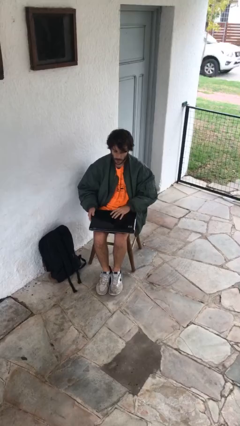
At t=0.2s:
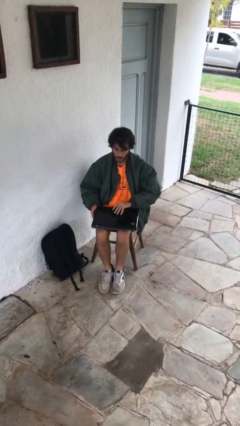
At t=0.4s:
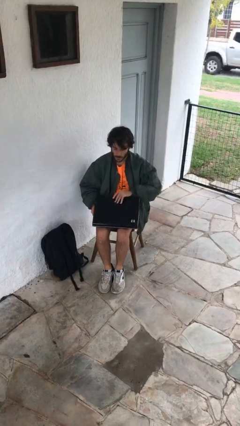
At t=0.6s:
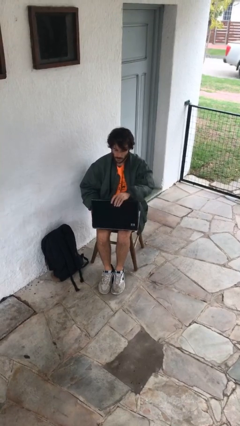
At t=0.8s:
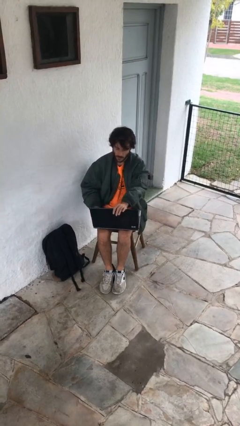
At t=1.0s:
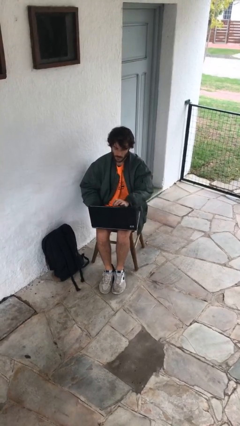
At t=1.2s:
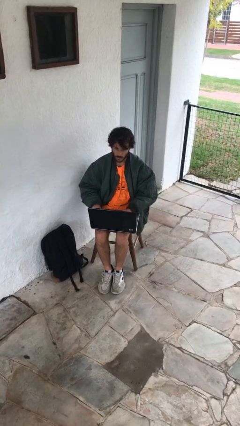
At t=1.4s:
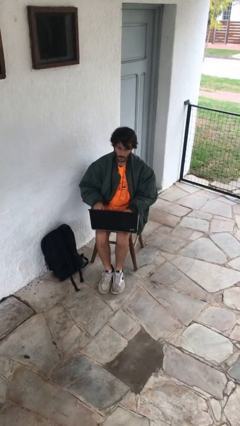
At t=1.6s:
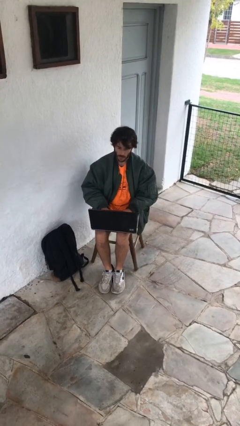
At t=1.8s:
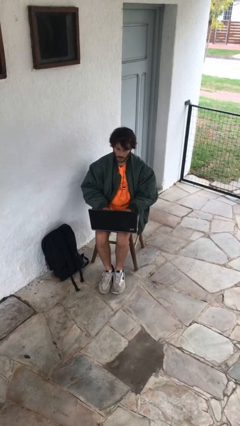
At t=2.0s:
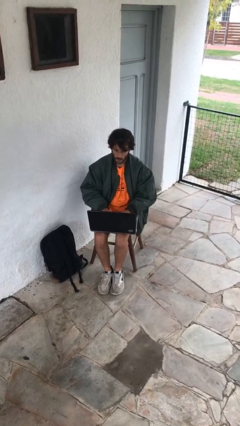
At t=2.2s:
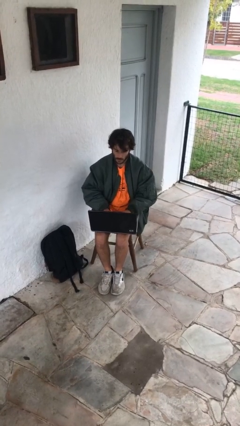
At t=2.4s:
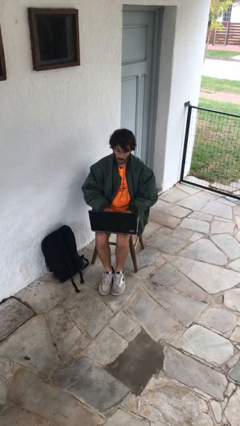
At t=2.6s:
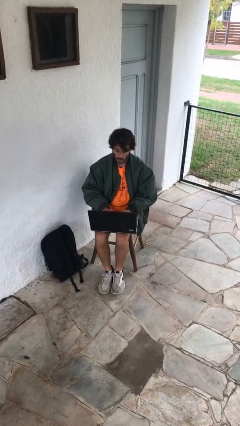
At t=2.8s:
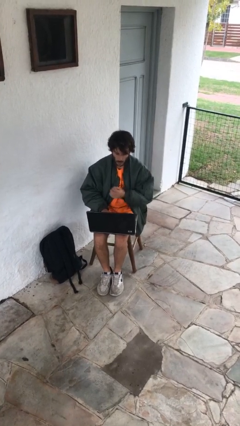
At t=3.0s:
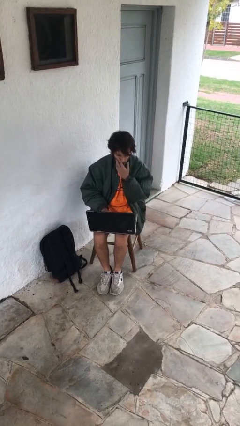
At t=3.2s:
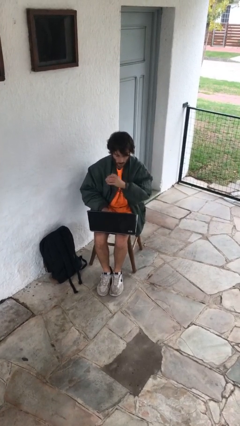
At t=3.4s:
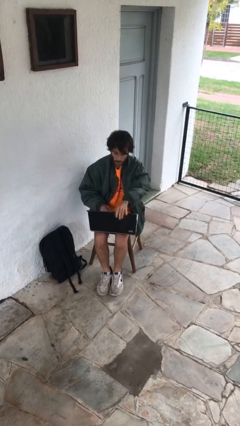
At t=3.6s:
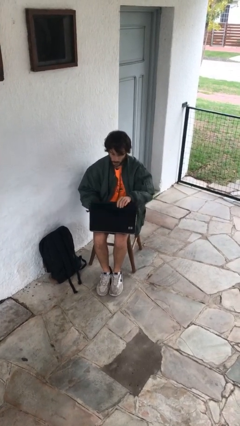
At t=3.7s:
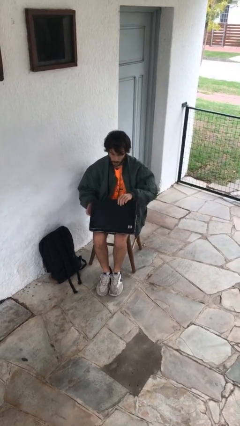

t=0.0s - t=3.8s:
person interacts with laptop

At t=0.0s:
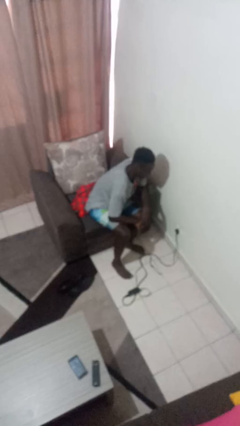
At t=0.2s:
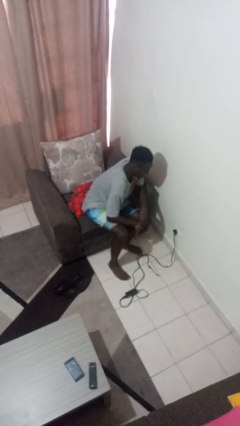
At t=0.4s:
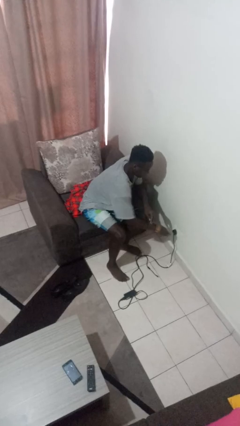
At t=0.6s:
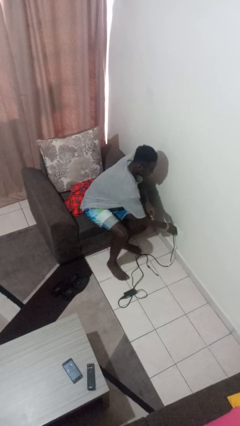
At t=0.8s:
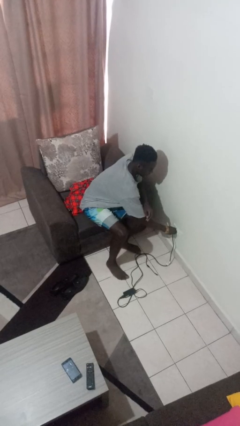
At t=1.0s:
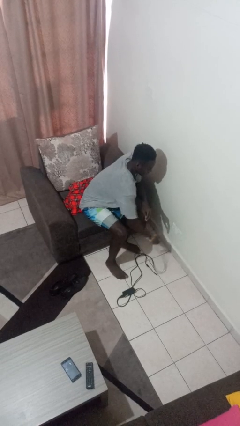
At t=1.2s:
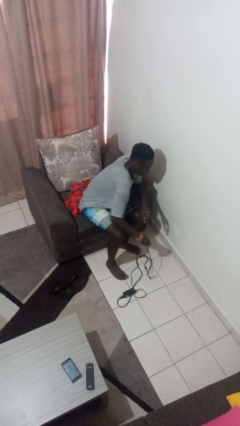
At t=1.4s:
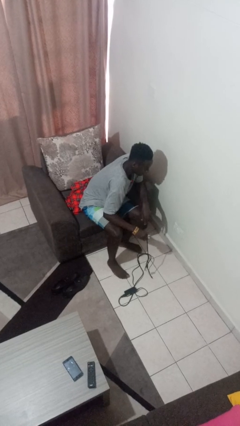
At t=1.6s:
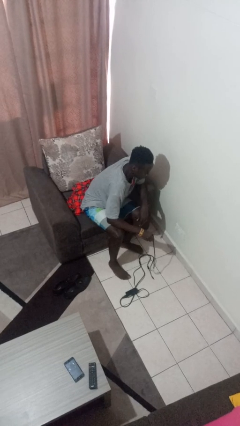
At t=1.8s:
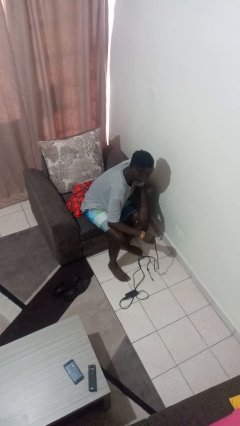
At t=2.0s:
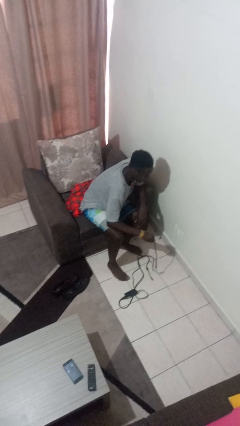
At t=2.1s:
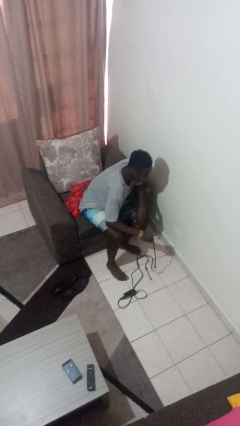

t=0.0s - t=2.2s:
person unplugs from electrical socket

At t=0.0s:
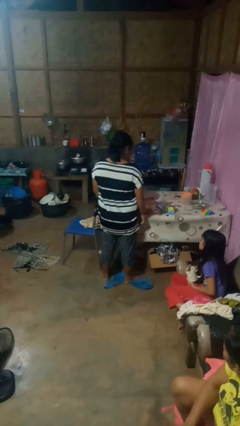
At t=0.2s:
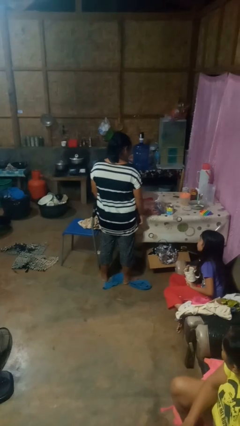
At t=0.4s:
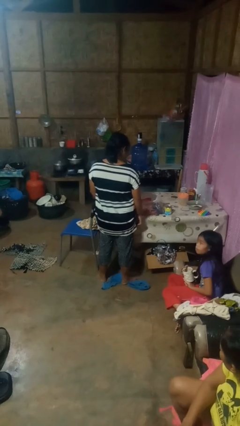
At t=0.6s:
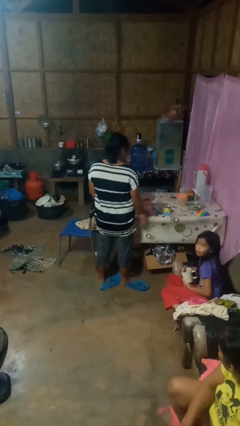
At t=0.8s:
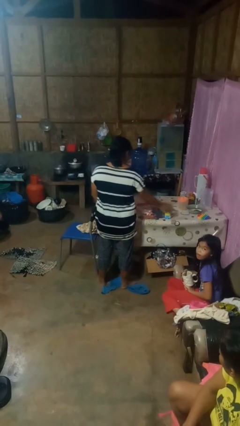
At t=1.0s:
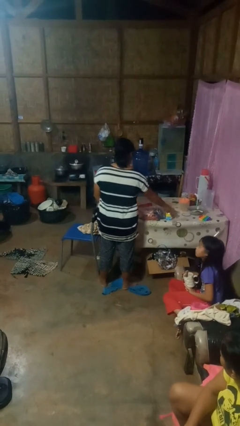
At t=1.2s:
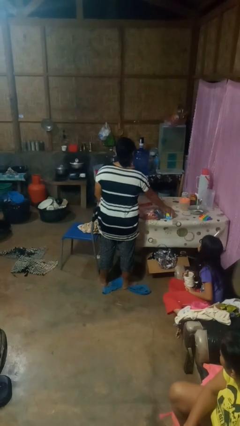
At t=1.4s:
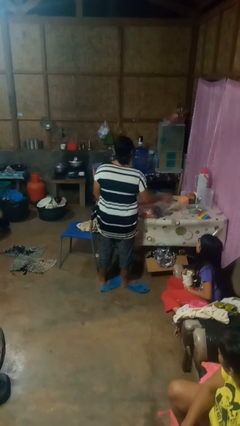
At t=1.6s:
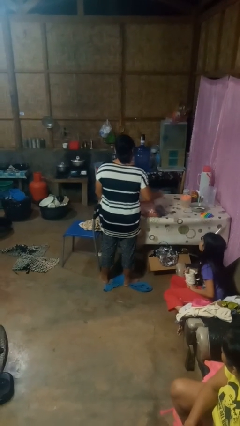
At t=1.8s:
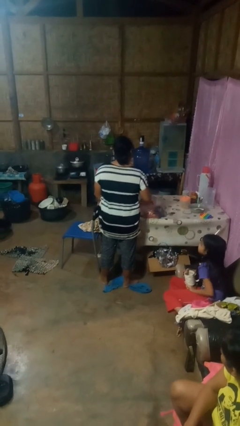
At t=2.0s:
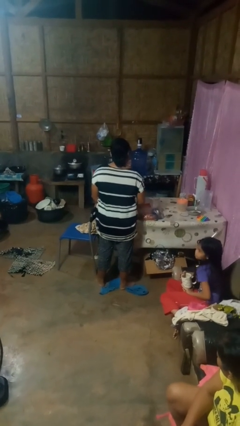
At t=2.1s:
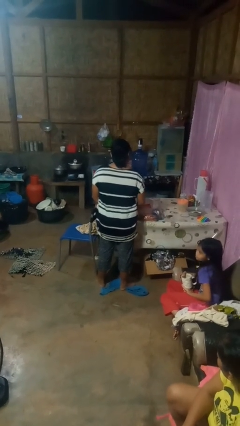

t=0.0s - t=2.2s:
person puts object into bag

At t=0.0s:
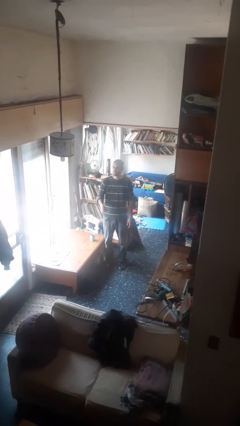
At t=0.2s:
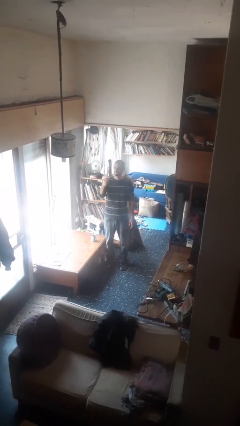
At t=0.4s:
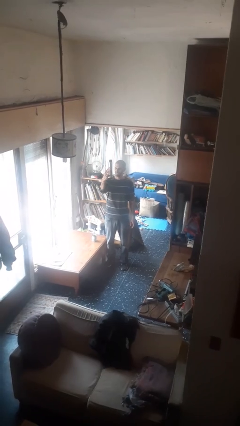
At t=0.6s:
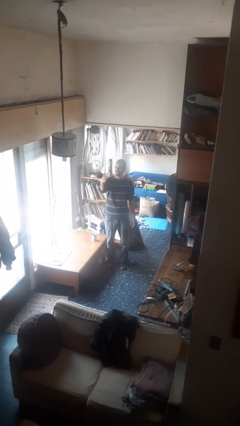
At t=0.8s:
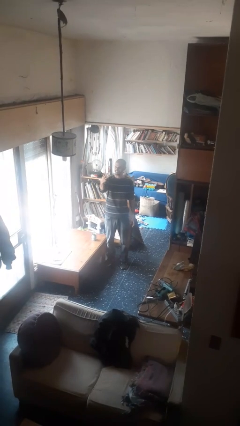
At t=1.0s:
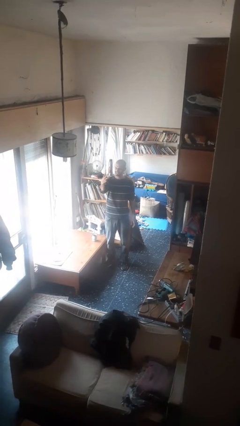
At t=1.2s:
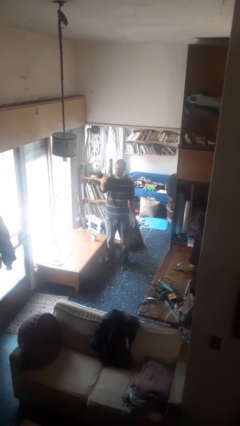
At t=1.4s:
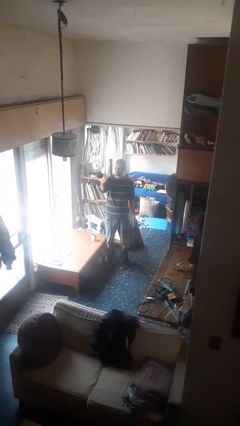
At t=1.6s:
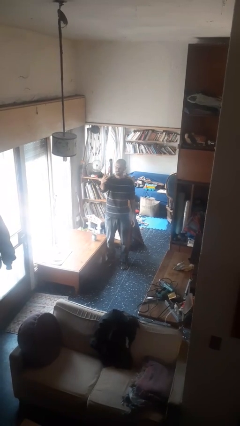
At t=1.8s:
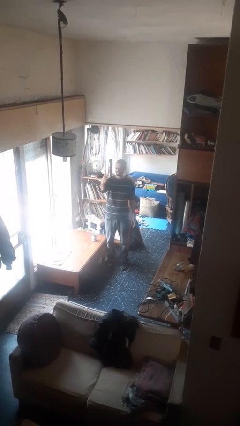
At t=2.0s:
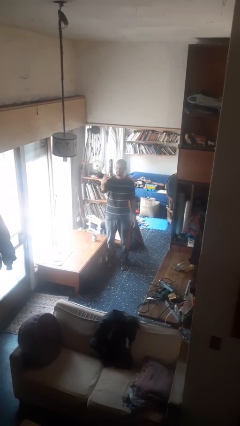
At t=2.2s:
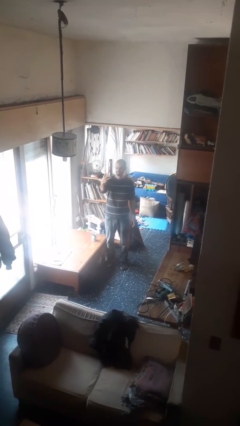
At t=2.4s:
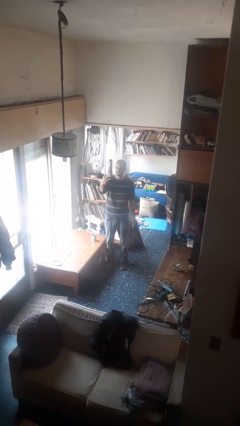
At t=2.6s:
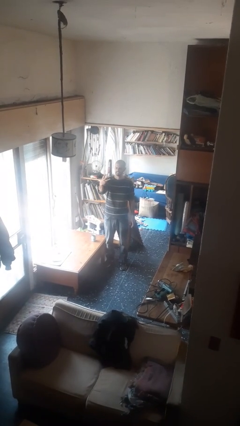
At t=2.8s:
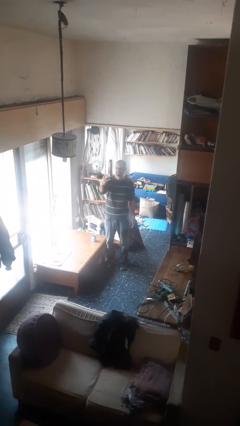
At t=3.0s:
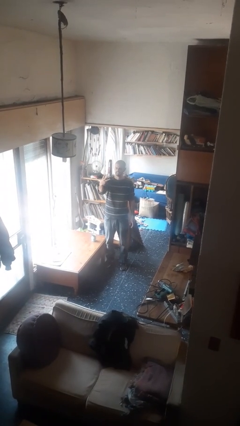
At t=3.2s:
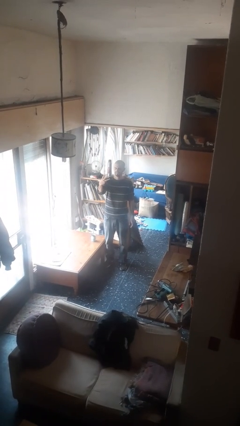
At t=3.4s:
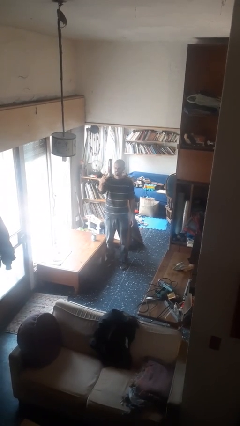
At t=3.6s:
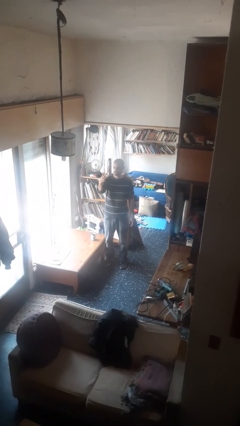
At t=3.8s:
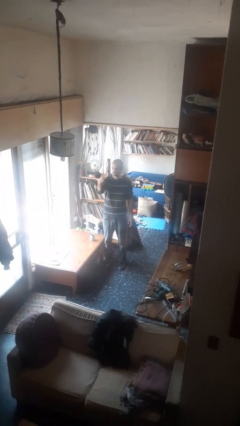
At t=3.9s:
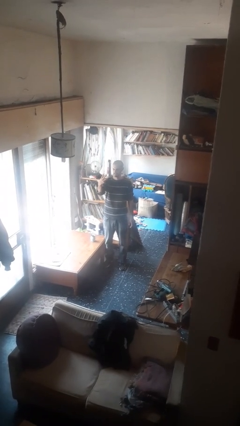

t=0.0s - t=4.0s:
person gestures number three

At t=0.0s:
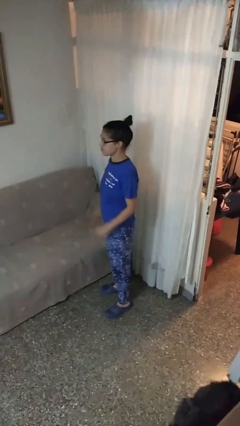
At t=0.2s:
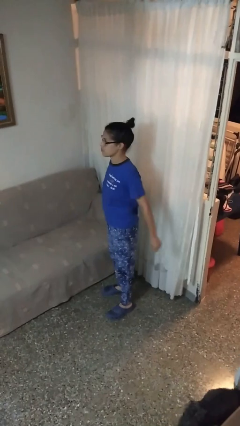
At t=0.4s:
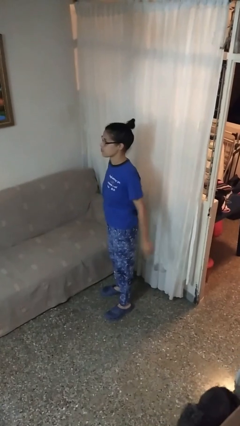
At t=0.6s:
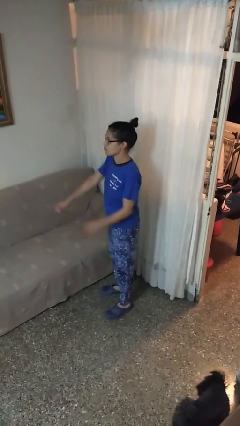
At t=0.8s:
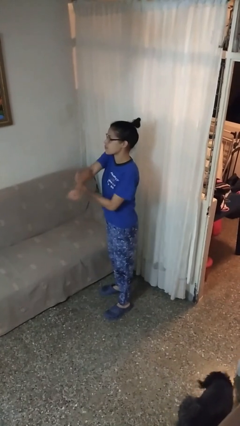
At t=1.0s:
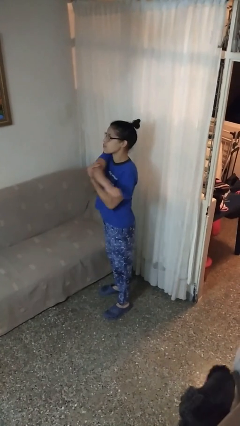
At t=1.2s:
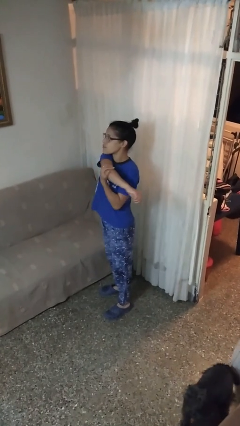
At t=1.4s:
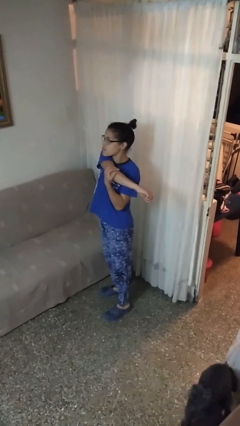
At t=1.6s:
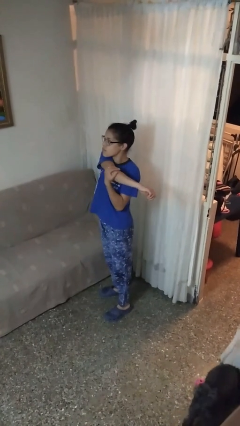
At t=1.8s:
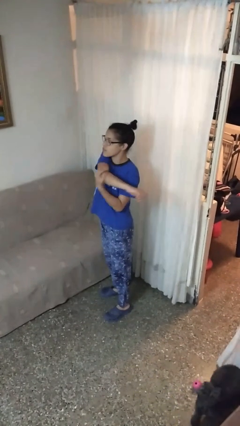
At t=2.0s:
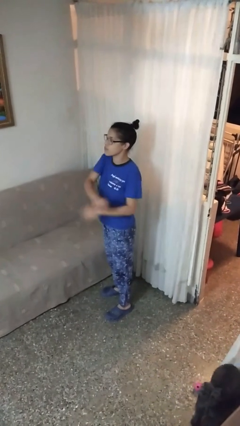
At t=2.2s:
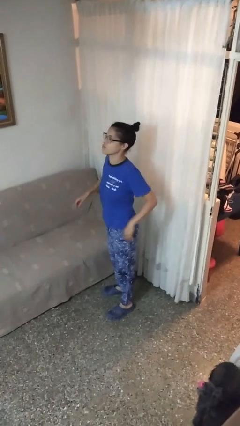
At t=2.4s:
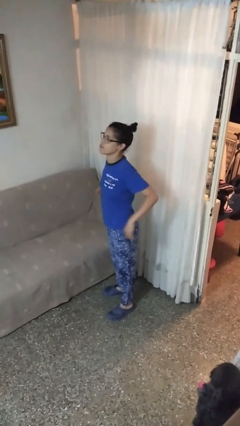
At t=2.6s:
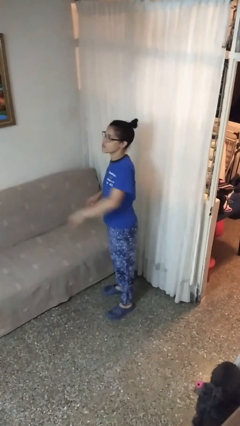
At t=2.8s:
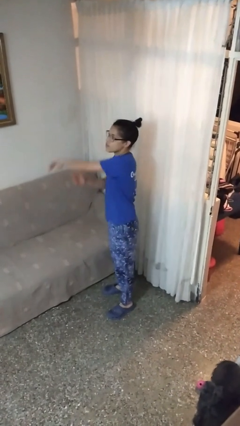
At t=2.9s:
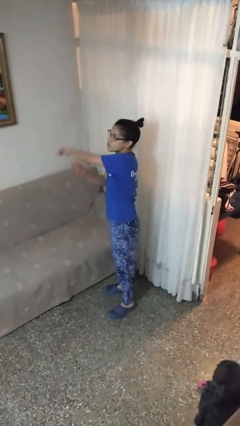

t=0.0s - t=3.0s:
person stretches arms to side

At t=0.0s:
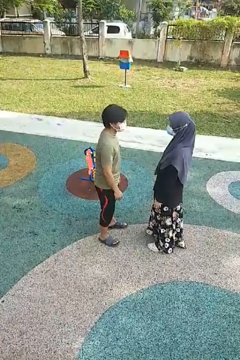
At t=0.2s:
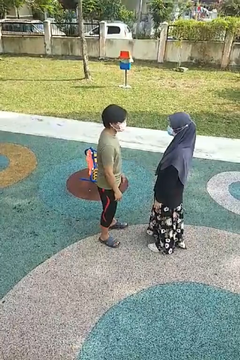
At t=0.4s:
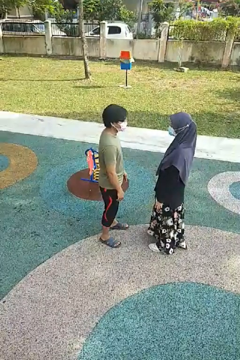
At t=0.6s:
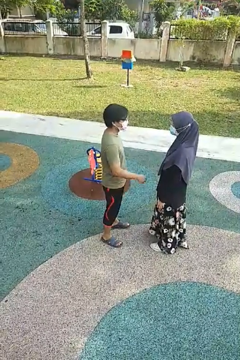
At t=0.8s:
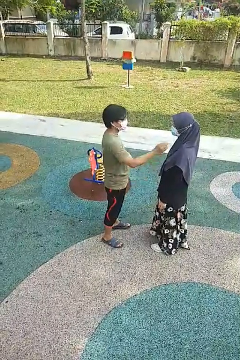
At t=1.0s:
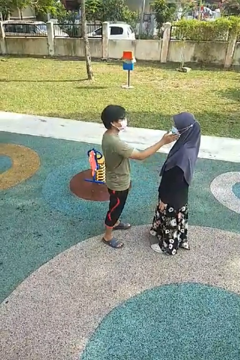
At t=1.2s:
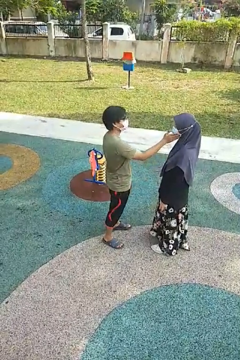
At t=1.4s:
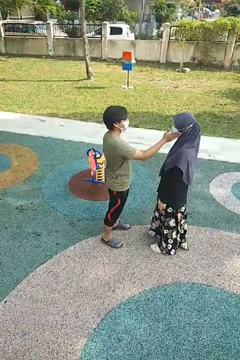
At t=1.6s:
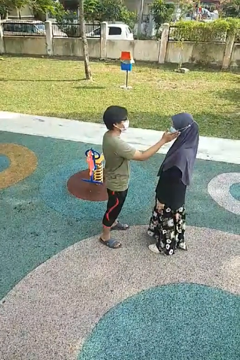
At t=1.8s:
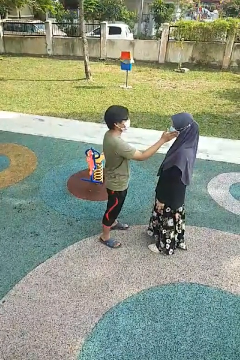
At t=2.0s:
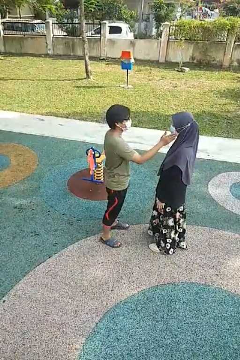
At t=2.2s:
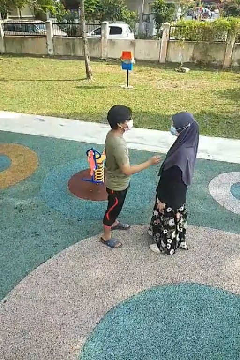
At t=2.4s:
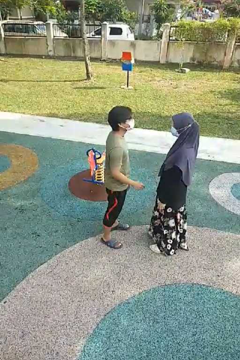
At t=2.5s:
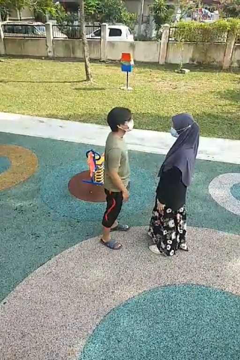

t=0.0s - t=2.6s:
person touches face of person
